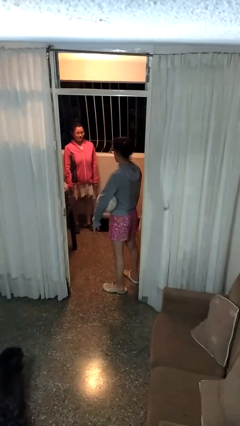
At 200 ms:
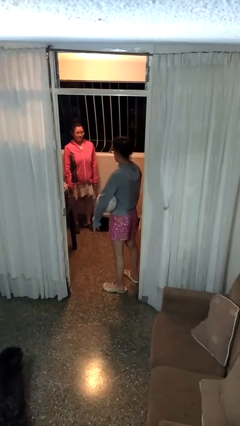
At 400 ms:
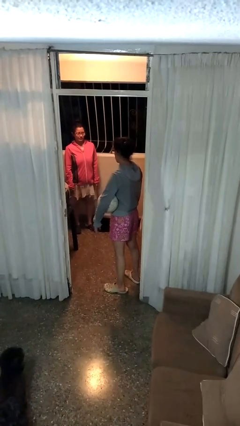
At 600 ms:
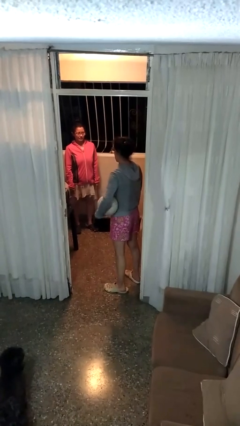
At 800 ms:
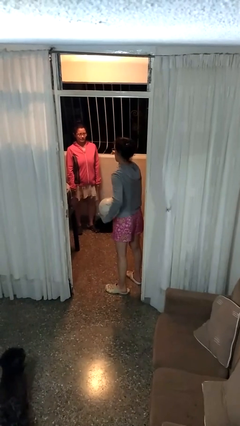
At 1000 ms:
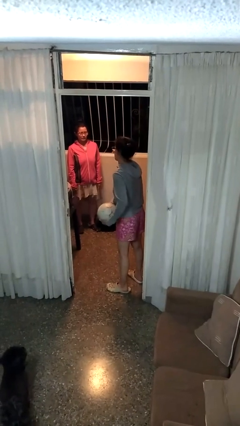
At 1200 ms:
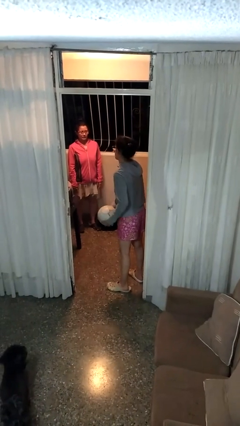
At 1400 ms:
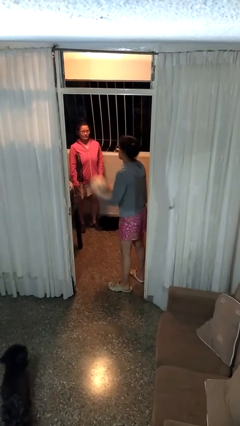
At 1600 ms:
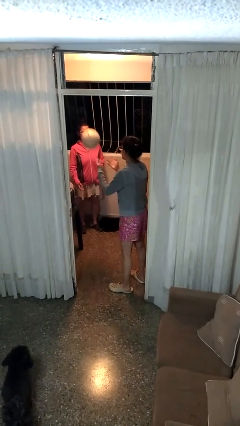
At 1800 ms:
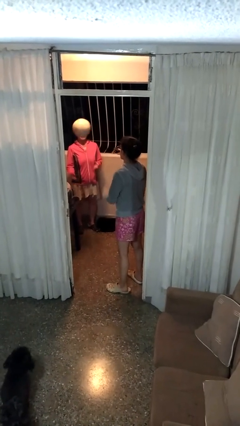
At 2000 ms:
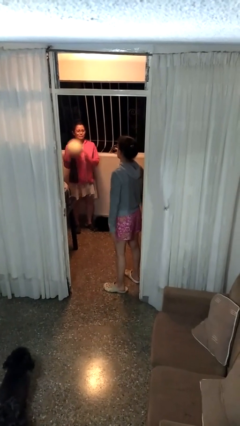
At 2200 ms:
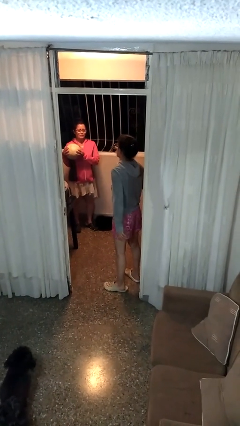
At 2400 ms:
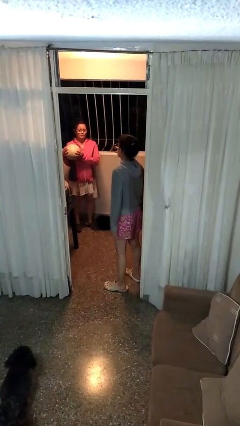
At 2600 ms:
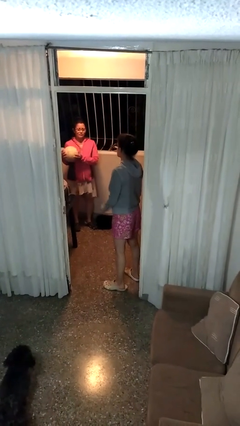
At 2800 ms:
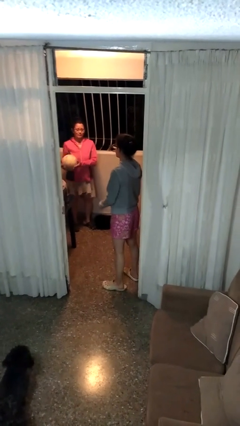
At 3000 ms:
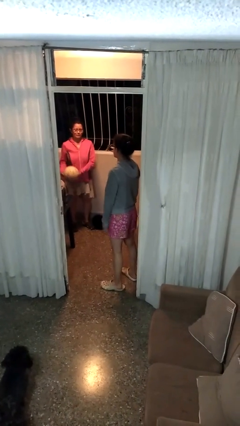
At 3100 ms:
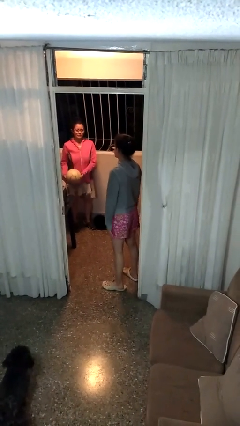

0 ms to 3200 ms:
person throws object to person

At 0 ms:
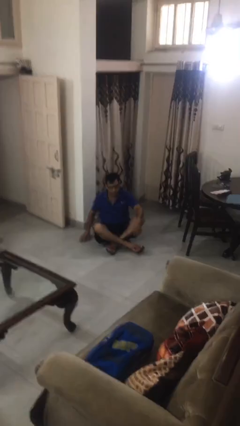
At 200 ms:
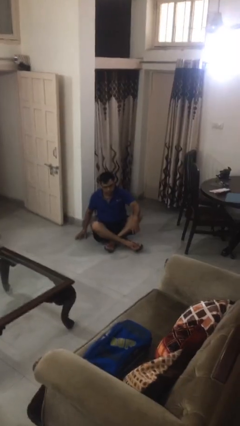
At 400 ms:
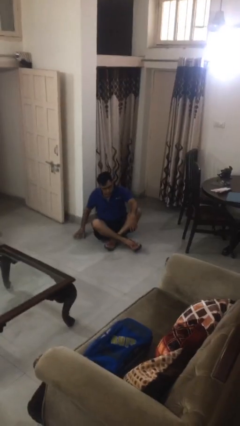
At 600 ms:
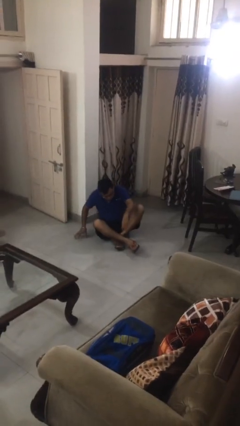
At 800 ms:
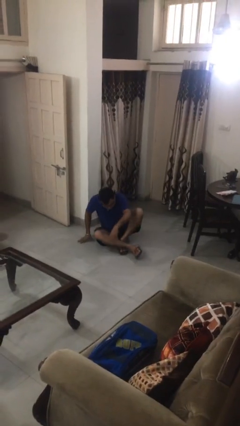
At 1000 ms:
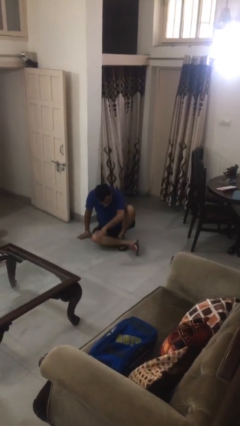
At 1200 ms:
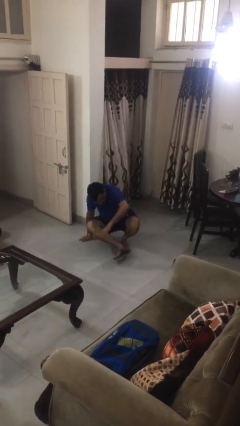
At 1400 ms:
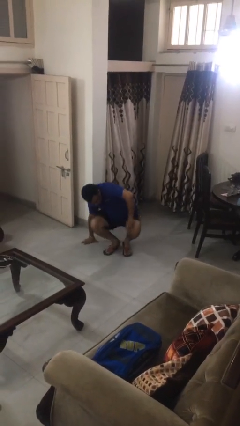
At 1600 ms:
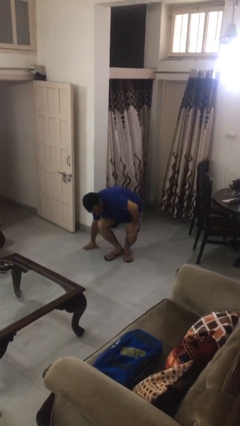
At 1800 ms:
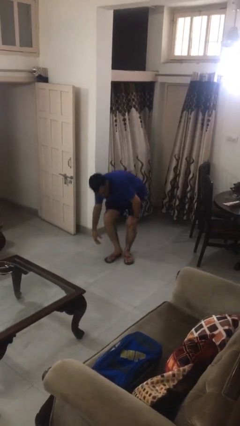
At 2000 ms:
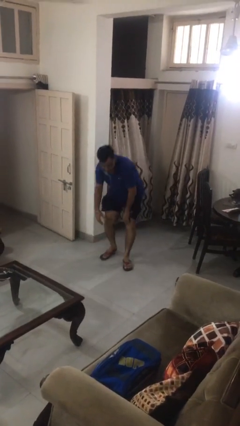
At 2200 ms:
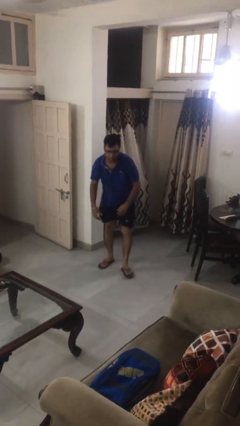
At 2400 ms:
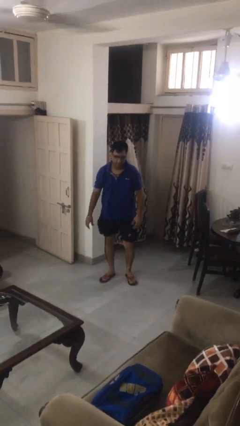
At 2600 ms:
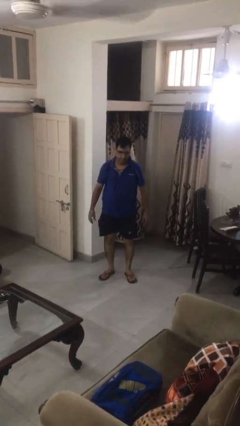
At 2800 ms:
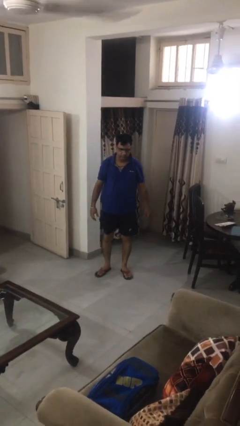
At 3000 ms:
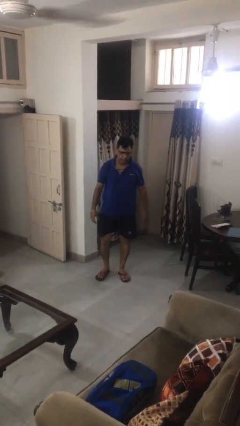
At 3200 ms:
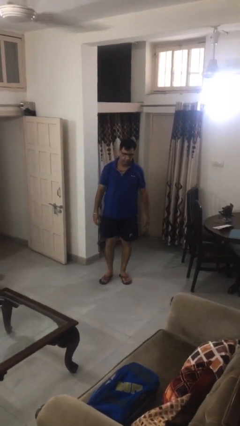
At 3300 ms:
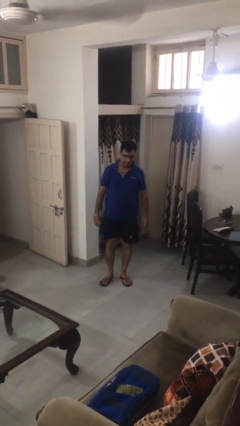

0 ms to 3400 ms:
person stands up from floor

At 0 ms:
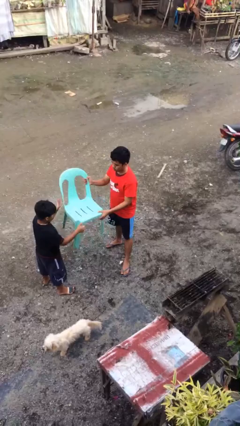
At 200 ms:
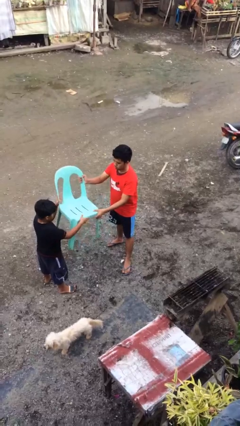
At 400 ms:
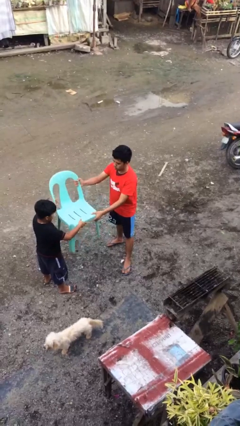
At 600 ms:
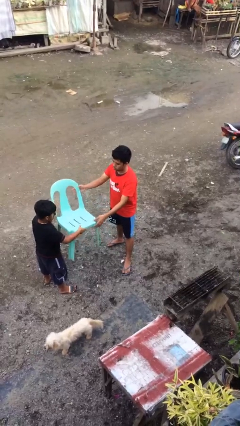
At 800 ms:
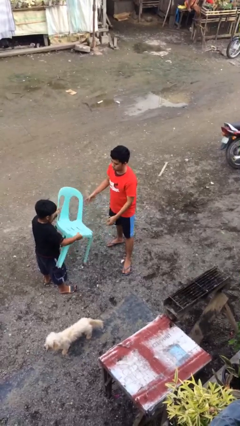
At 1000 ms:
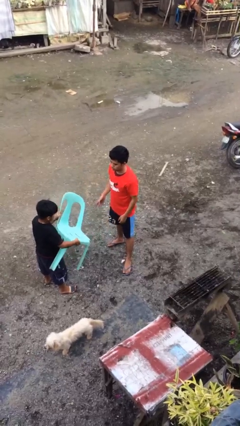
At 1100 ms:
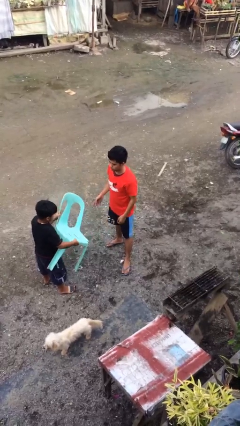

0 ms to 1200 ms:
person transfers object to person

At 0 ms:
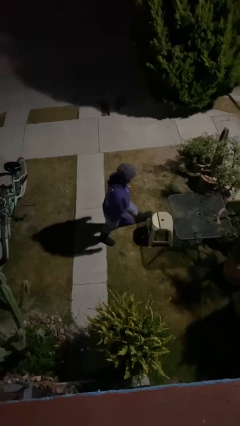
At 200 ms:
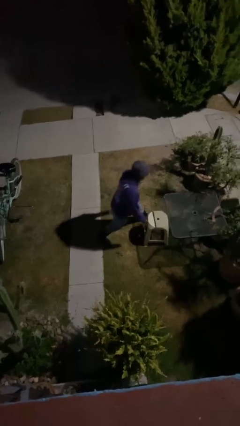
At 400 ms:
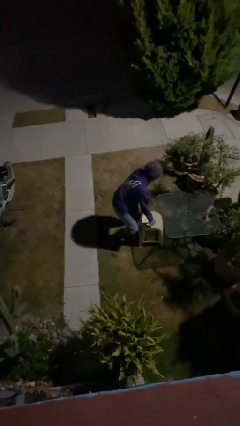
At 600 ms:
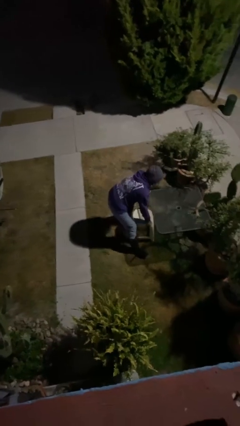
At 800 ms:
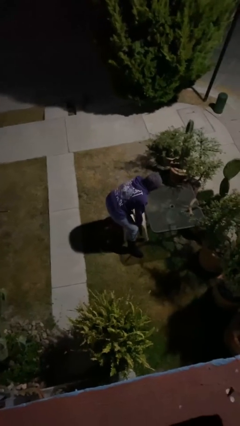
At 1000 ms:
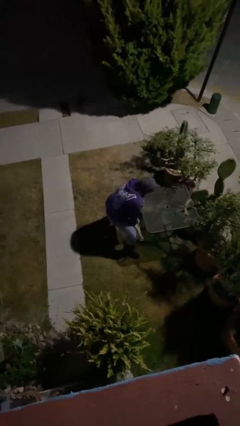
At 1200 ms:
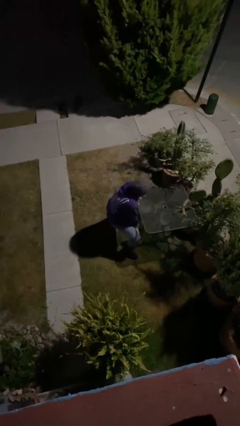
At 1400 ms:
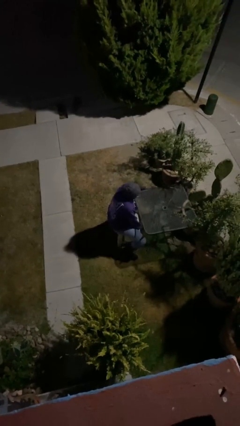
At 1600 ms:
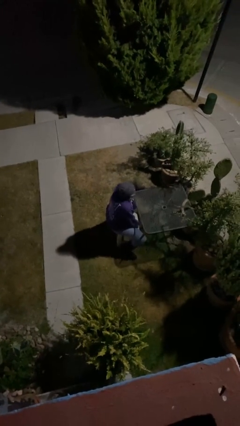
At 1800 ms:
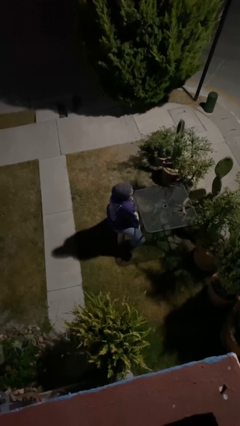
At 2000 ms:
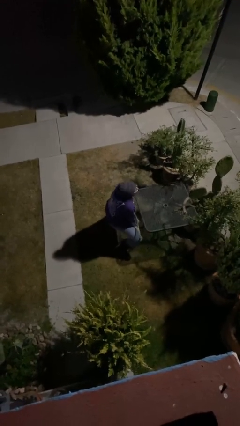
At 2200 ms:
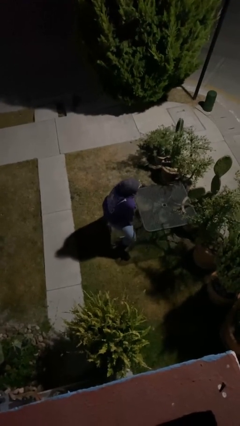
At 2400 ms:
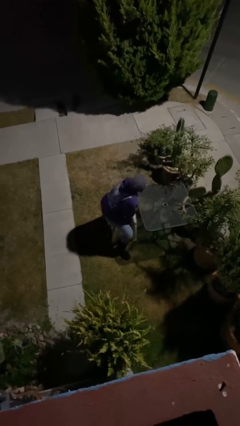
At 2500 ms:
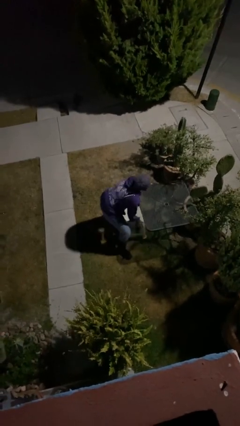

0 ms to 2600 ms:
person sits down

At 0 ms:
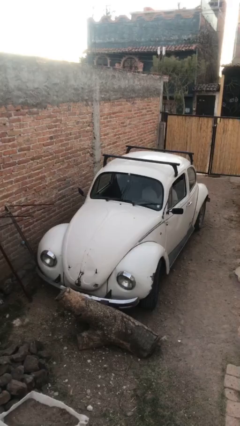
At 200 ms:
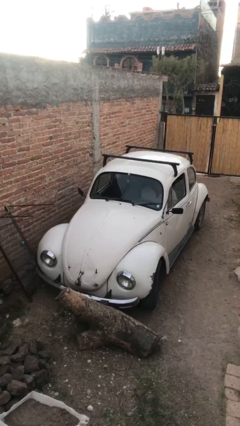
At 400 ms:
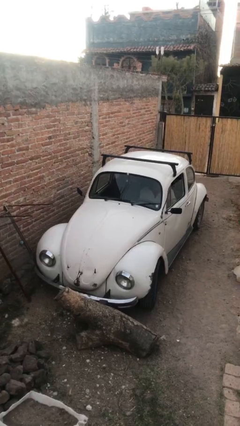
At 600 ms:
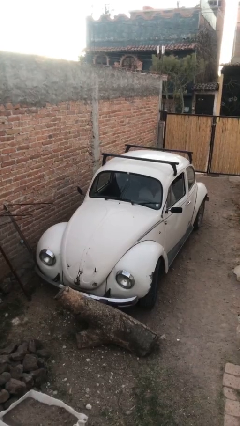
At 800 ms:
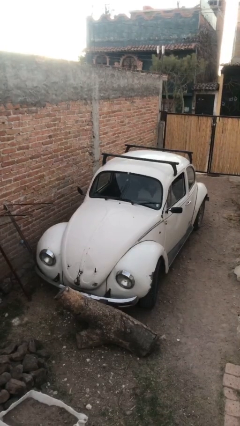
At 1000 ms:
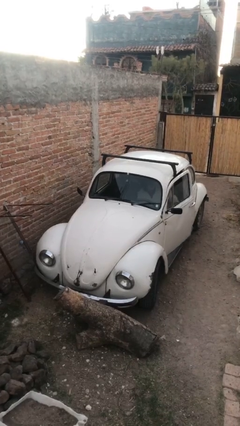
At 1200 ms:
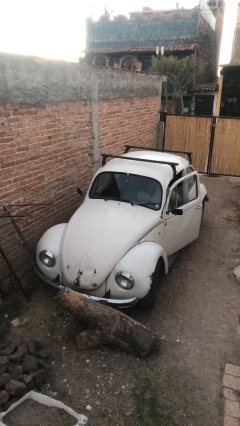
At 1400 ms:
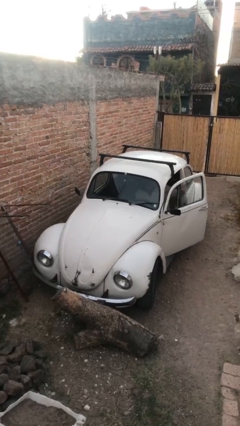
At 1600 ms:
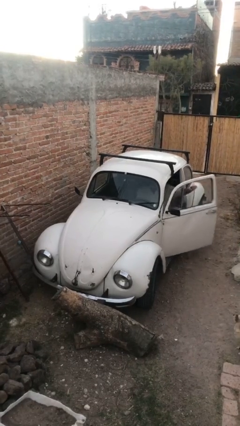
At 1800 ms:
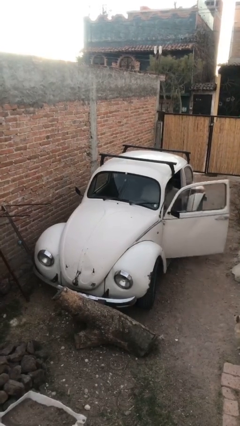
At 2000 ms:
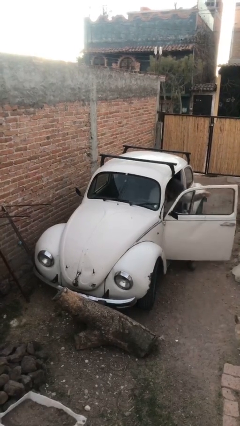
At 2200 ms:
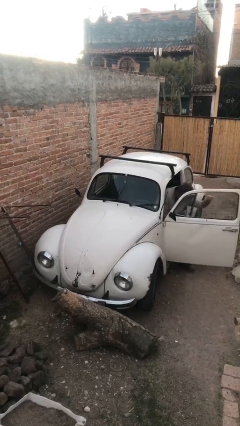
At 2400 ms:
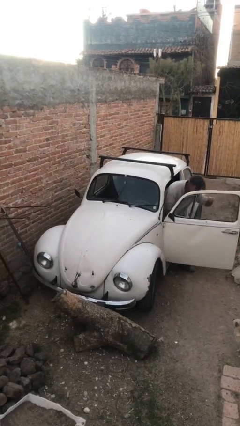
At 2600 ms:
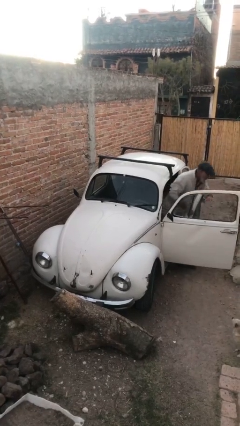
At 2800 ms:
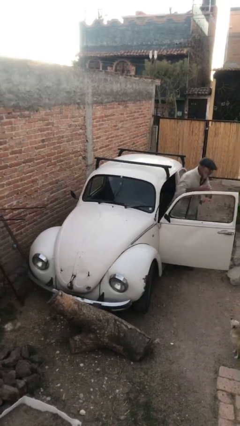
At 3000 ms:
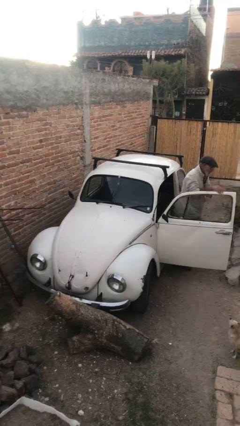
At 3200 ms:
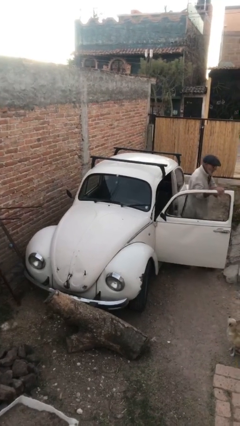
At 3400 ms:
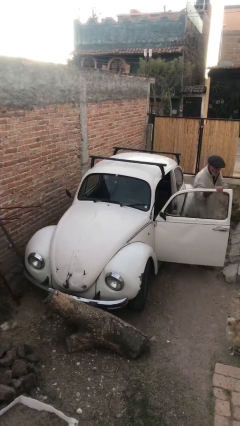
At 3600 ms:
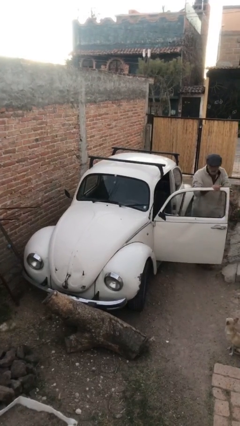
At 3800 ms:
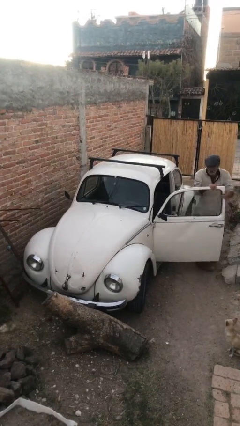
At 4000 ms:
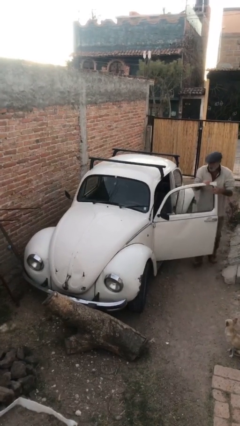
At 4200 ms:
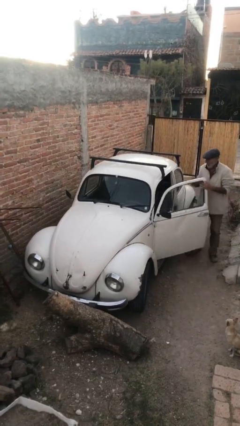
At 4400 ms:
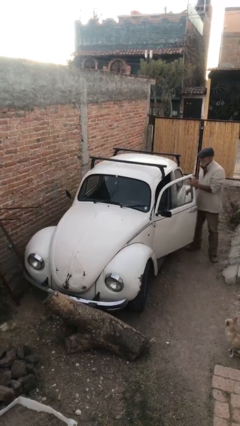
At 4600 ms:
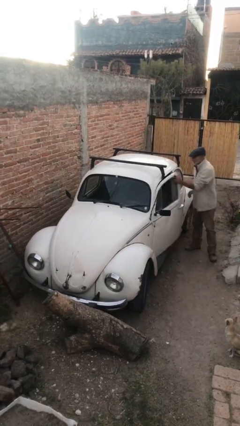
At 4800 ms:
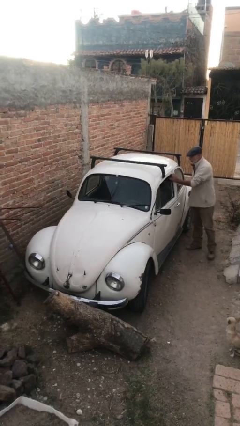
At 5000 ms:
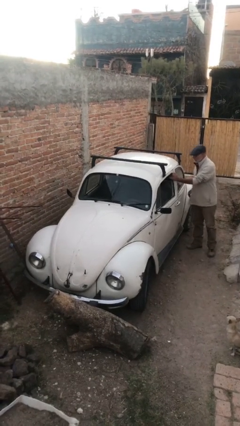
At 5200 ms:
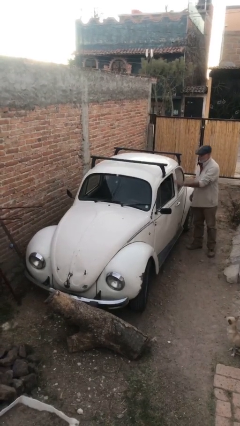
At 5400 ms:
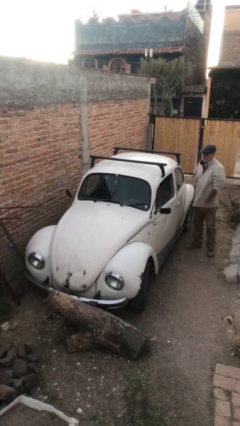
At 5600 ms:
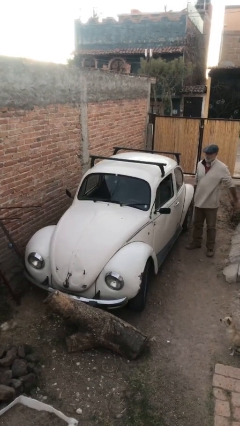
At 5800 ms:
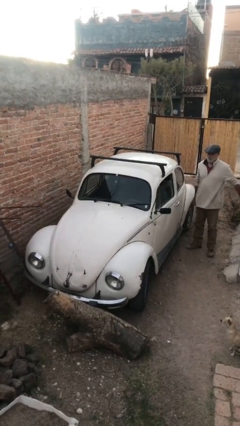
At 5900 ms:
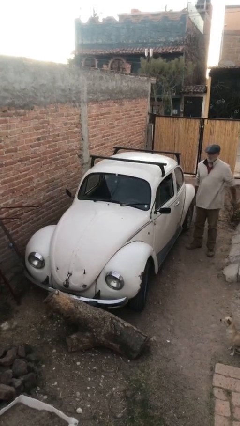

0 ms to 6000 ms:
car drops off person

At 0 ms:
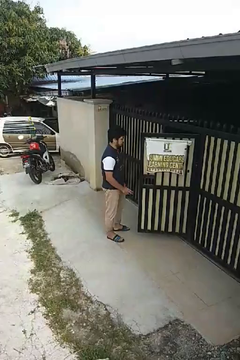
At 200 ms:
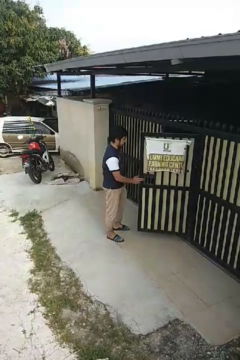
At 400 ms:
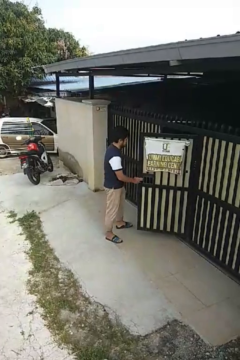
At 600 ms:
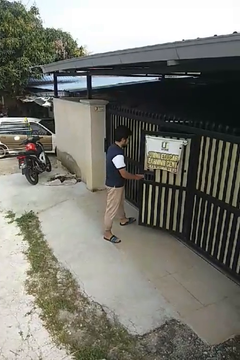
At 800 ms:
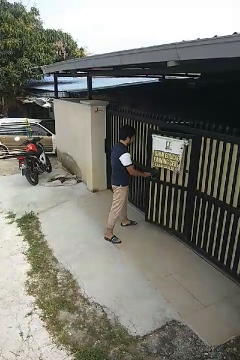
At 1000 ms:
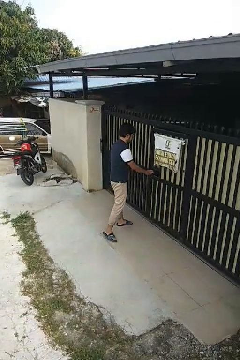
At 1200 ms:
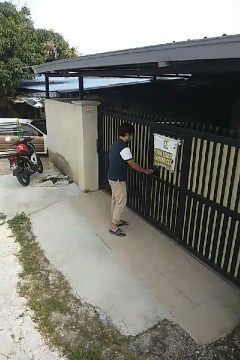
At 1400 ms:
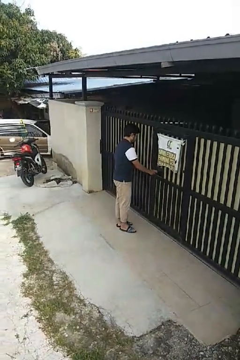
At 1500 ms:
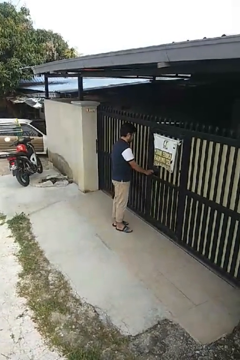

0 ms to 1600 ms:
person closes gate
